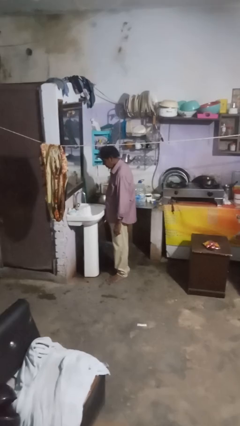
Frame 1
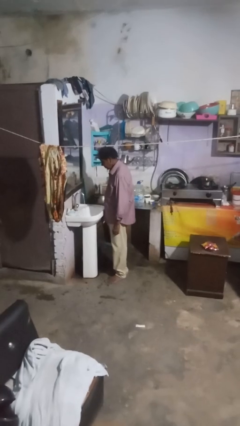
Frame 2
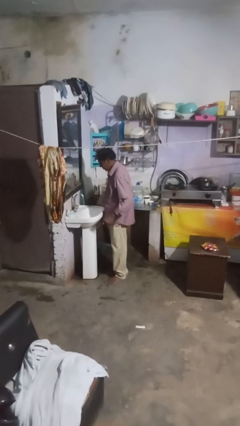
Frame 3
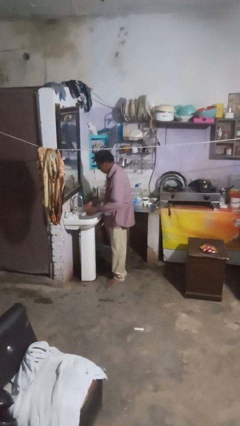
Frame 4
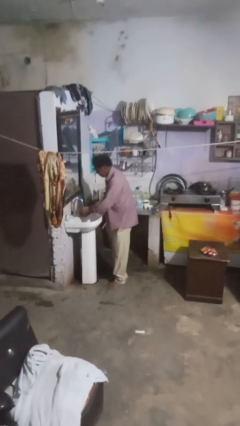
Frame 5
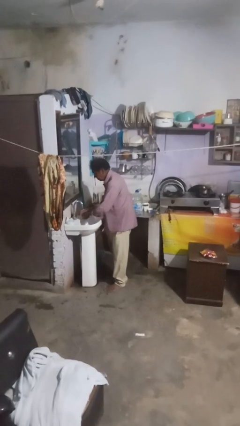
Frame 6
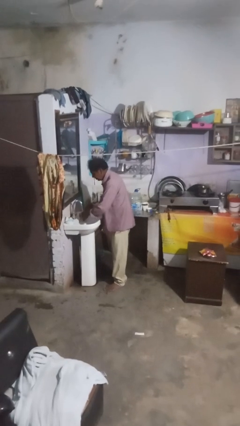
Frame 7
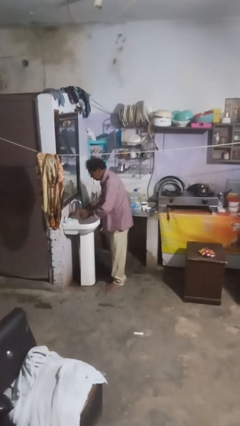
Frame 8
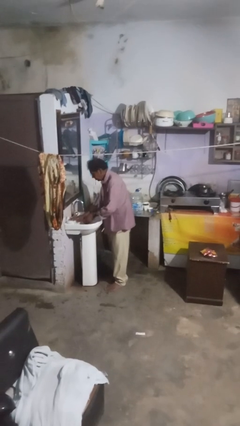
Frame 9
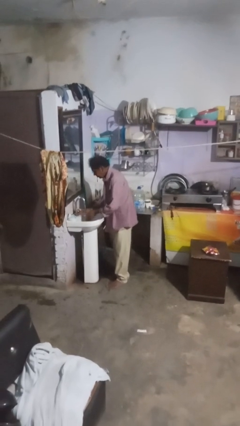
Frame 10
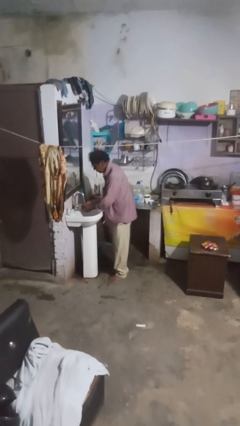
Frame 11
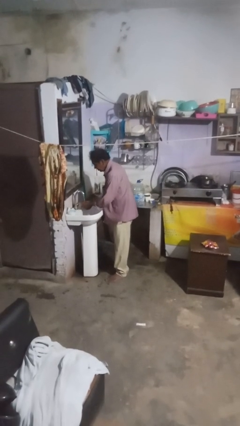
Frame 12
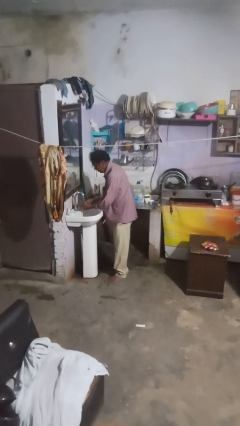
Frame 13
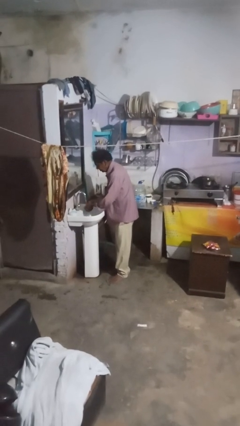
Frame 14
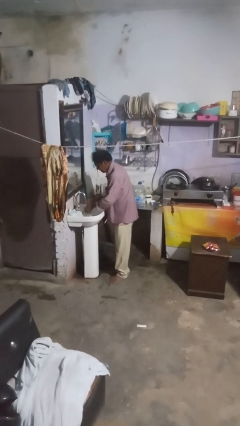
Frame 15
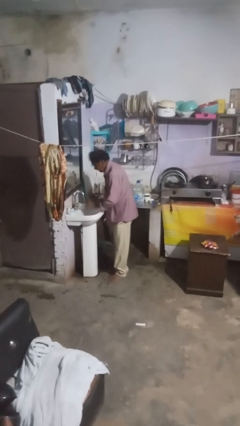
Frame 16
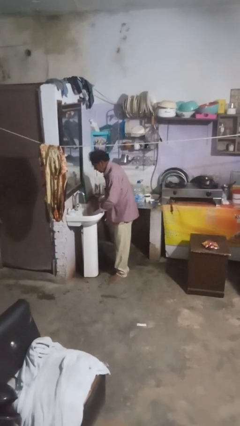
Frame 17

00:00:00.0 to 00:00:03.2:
person washes hands

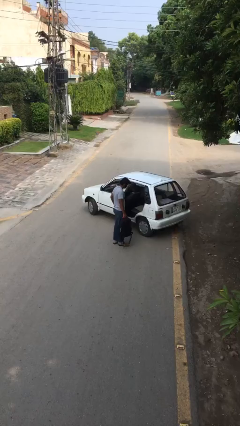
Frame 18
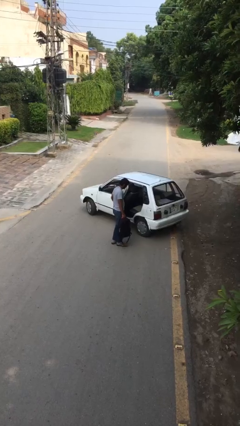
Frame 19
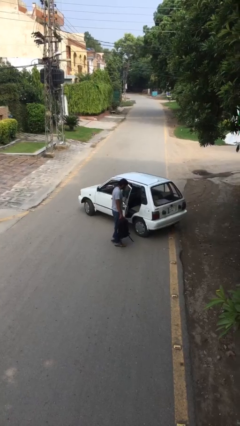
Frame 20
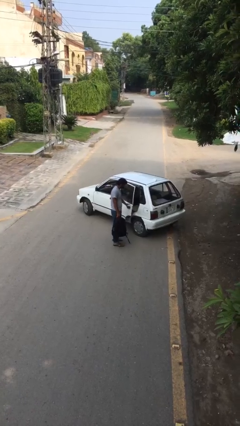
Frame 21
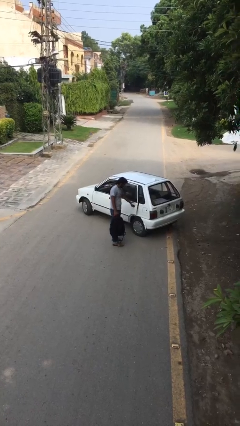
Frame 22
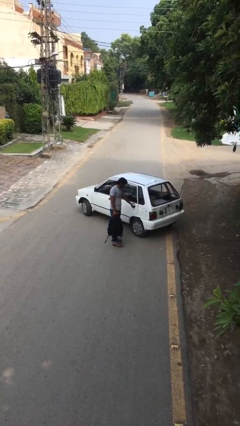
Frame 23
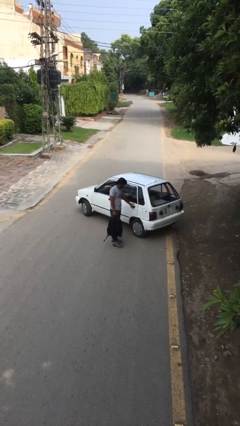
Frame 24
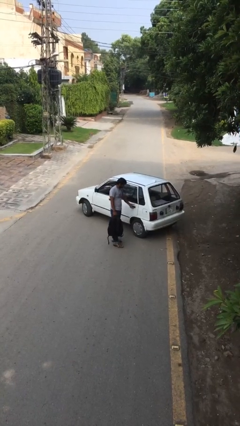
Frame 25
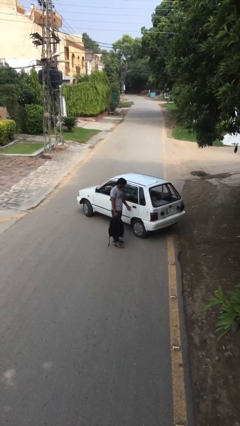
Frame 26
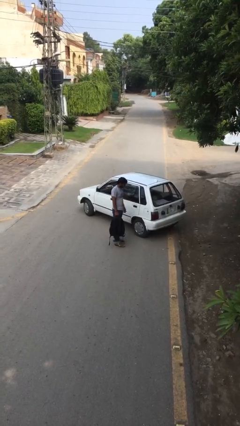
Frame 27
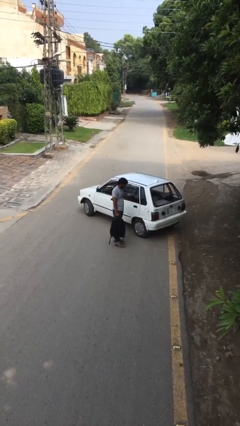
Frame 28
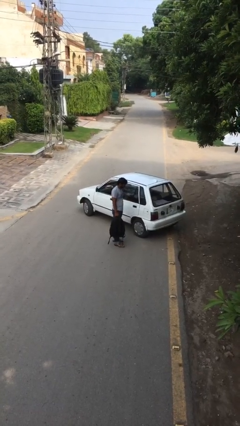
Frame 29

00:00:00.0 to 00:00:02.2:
person closes car door

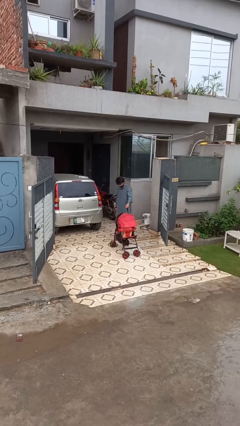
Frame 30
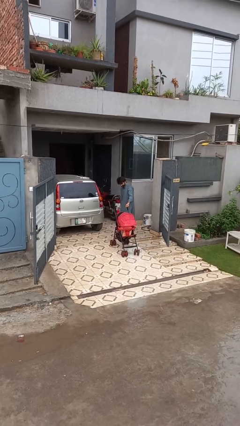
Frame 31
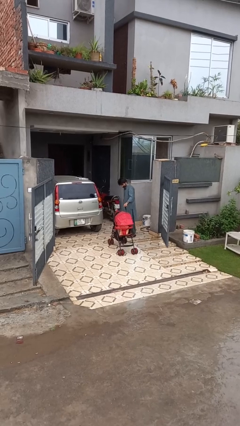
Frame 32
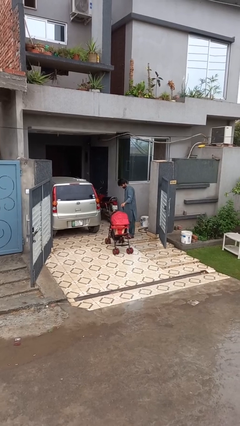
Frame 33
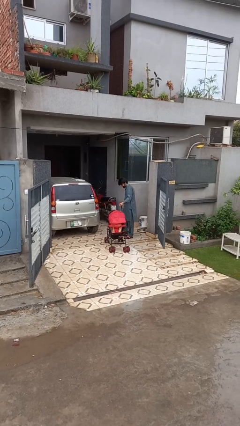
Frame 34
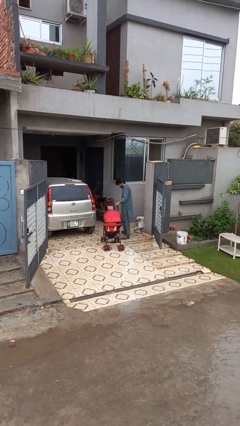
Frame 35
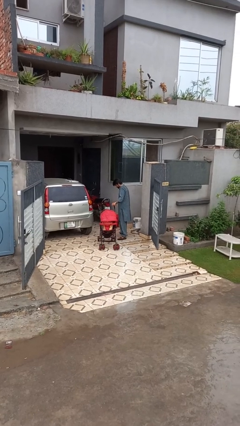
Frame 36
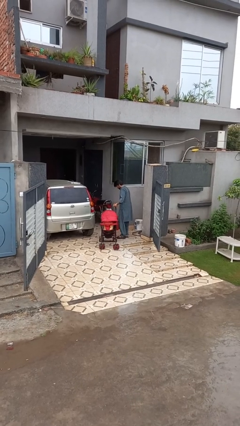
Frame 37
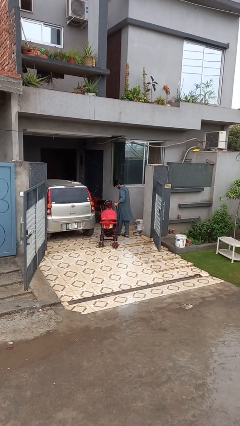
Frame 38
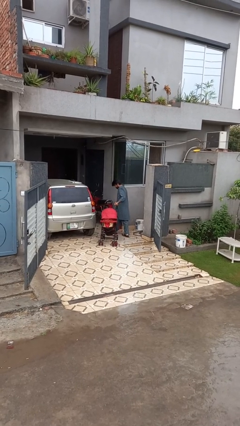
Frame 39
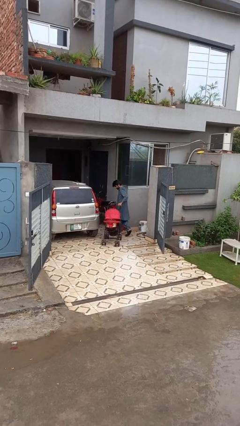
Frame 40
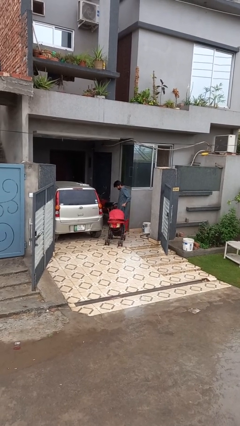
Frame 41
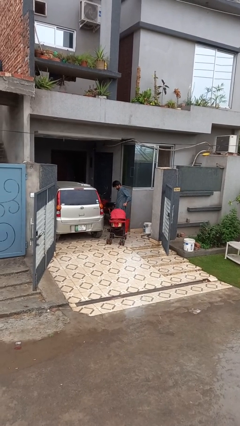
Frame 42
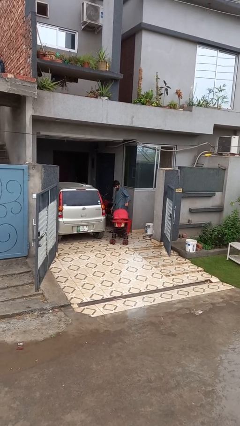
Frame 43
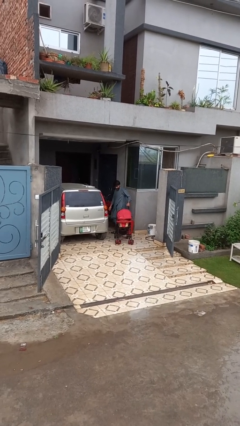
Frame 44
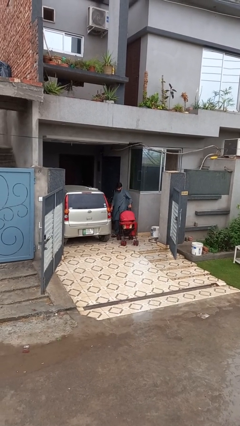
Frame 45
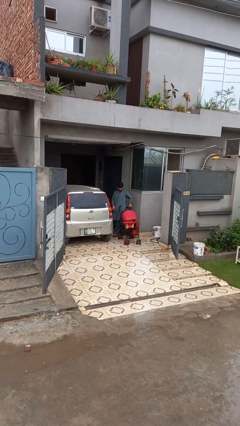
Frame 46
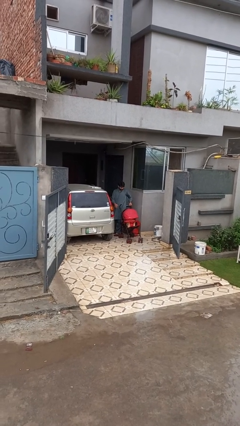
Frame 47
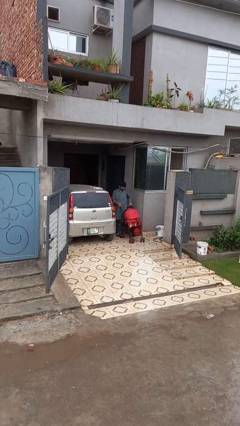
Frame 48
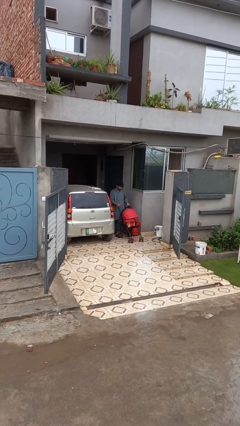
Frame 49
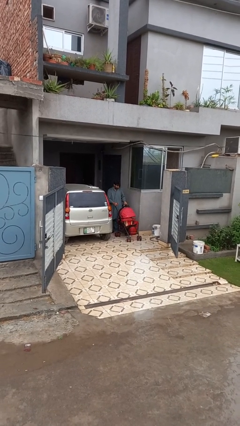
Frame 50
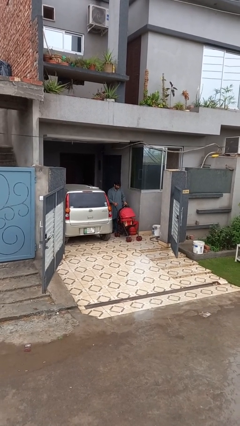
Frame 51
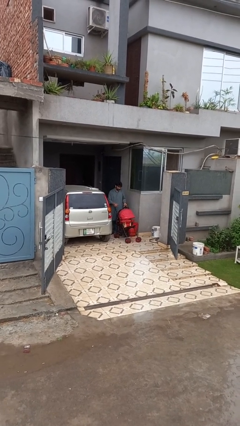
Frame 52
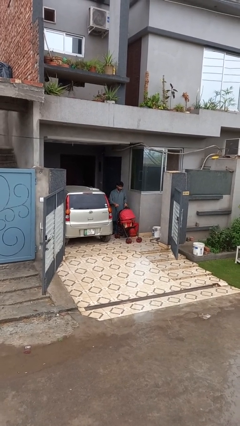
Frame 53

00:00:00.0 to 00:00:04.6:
person pulls wheeled cart

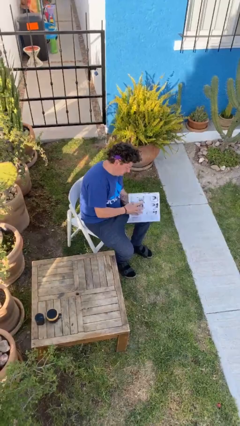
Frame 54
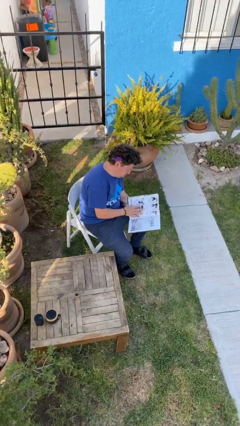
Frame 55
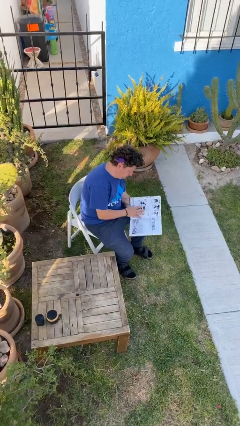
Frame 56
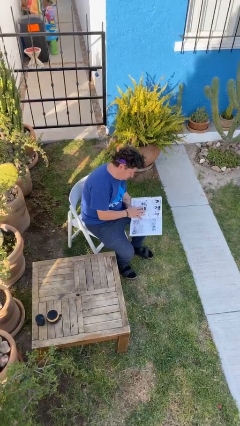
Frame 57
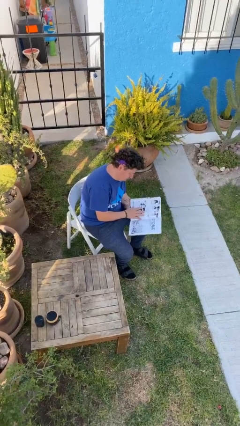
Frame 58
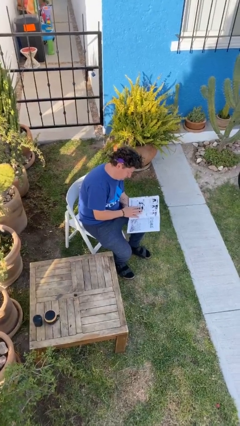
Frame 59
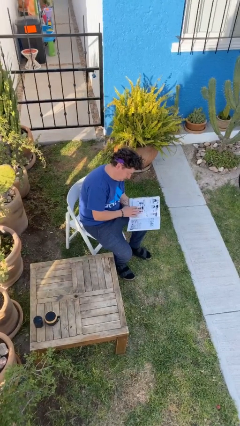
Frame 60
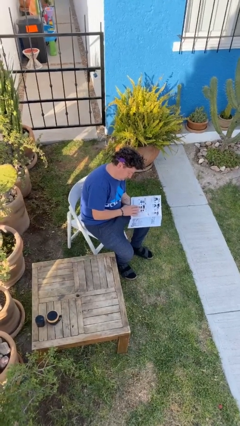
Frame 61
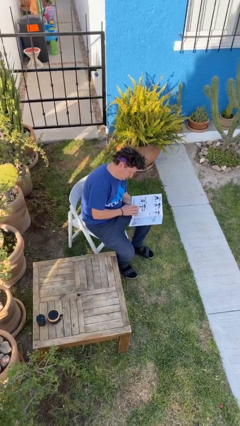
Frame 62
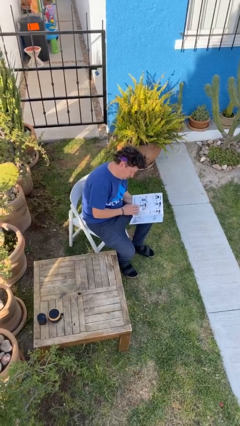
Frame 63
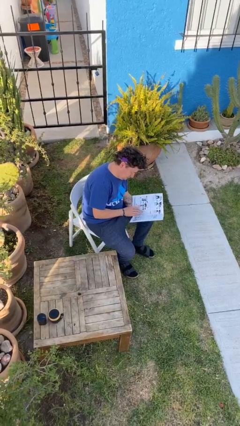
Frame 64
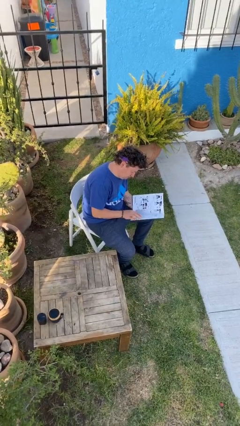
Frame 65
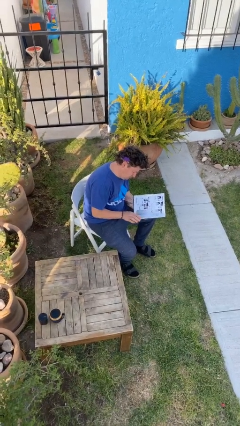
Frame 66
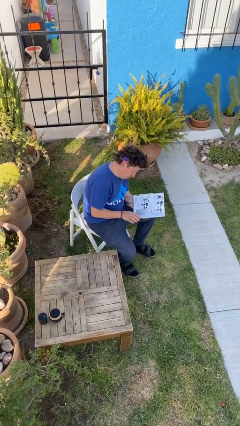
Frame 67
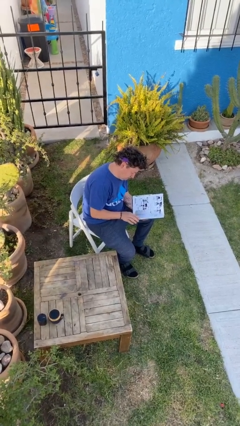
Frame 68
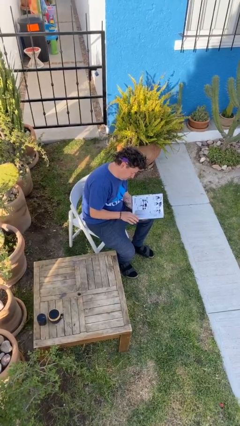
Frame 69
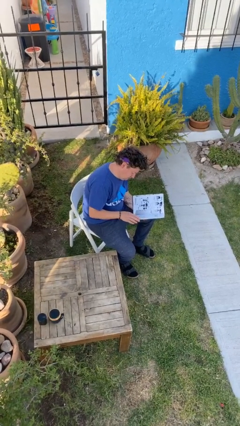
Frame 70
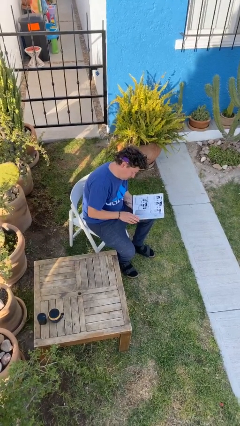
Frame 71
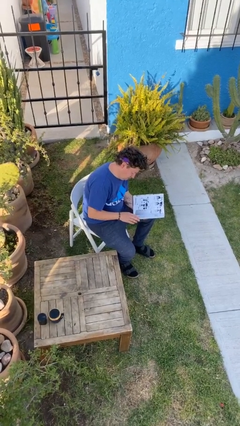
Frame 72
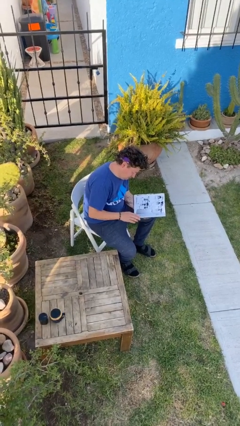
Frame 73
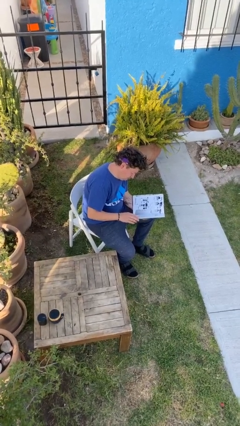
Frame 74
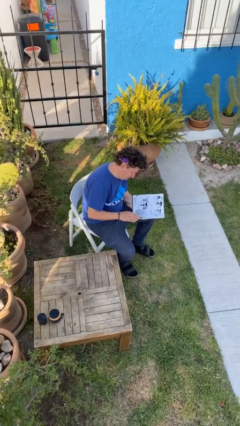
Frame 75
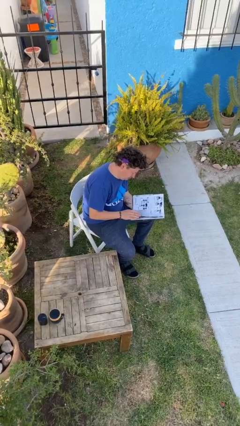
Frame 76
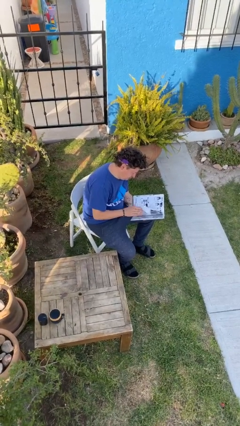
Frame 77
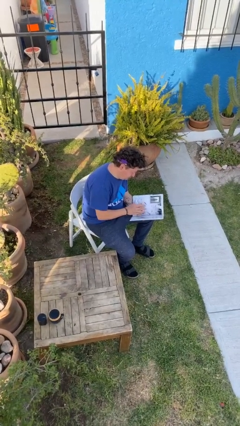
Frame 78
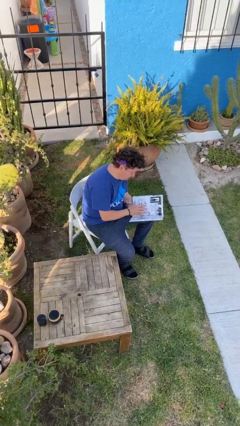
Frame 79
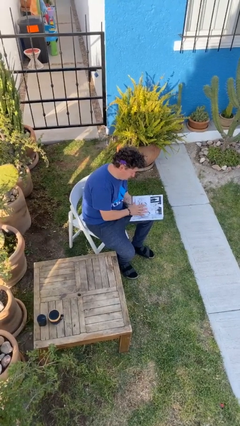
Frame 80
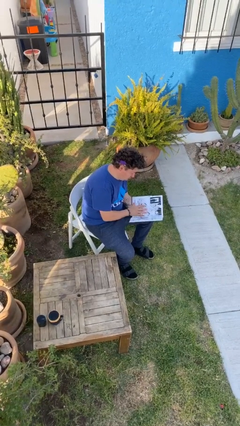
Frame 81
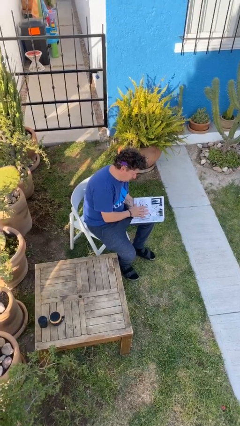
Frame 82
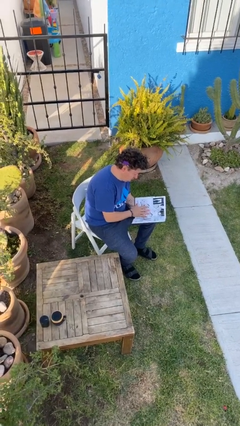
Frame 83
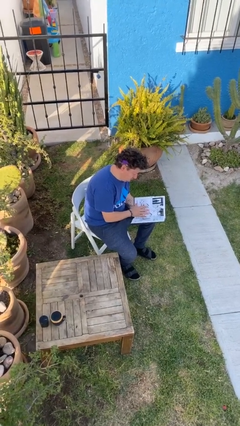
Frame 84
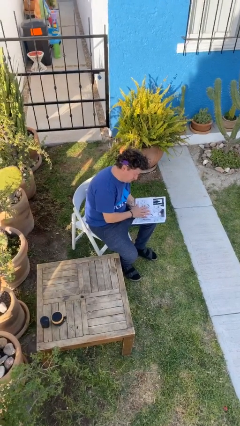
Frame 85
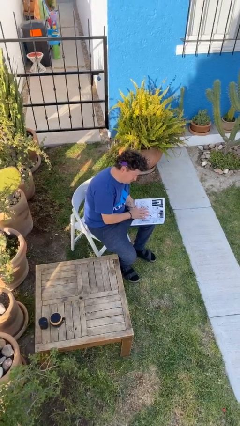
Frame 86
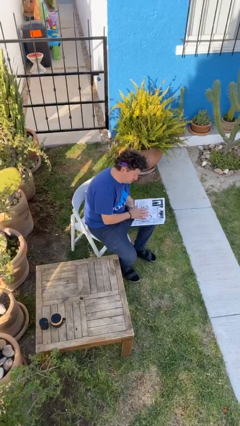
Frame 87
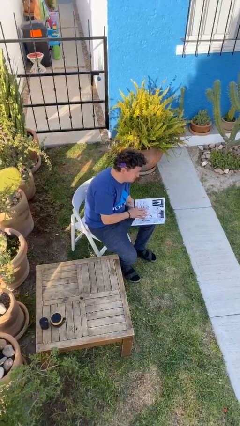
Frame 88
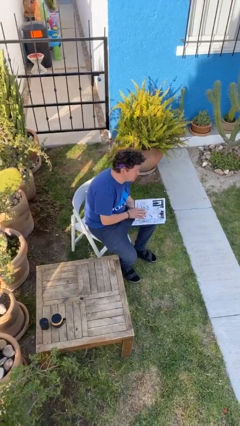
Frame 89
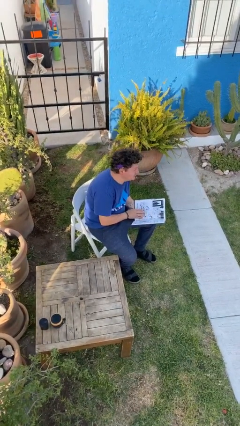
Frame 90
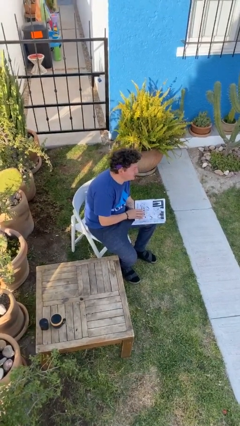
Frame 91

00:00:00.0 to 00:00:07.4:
person reads document

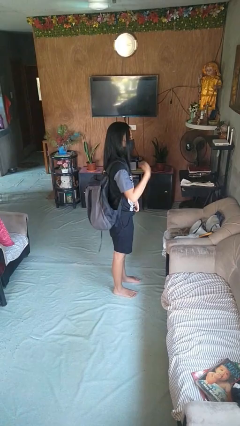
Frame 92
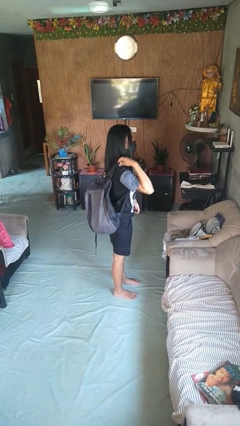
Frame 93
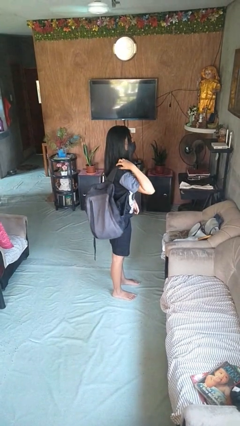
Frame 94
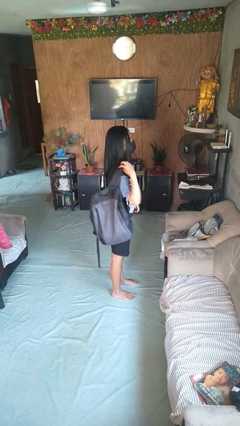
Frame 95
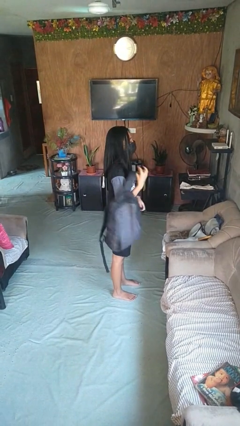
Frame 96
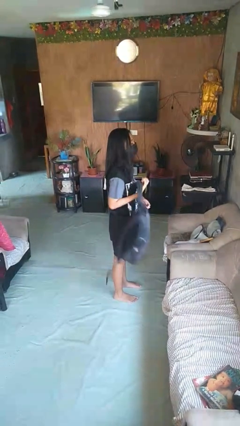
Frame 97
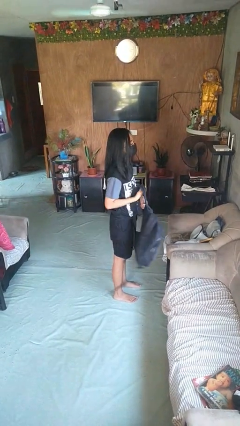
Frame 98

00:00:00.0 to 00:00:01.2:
person takes off backpack
